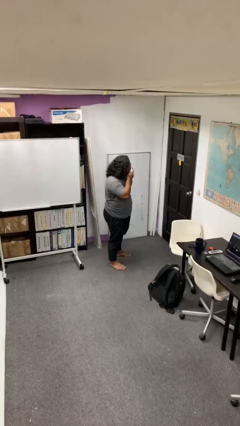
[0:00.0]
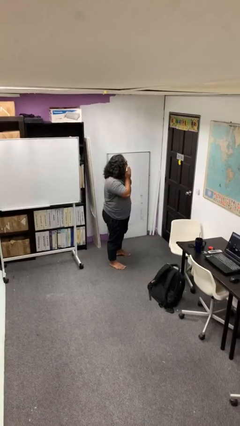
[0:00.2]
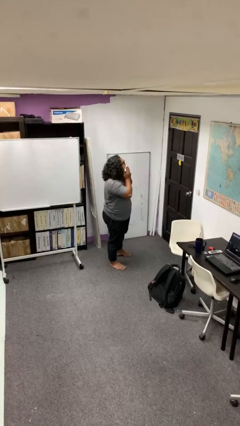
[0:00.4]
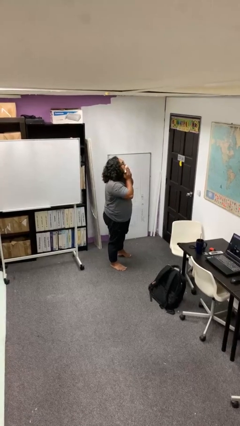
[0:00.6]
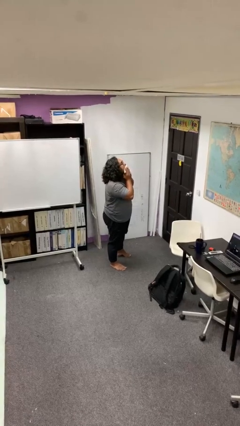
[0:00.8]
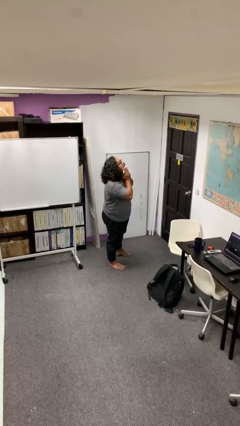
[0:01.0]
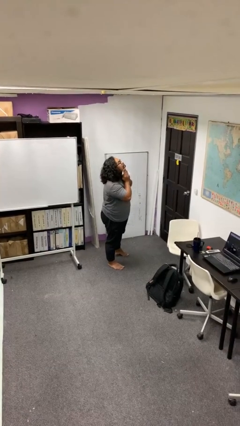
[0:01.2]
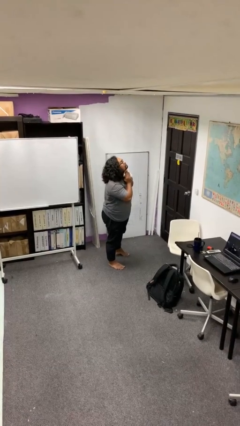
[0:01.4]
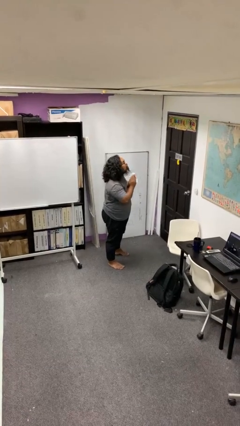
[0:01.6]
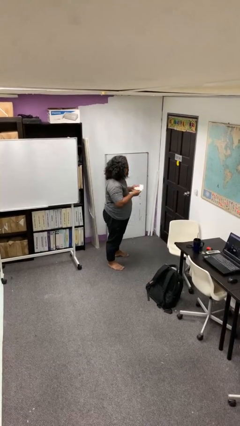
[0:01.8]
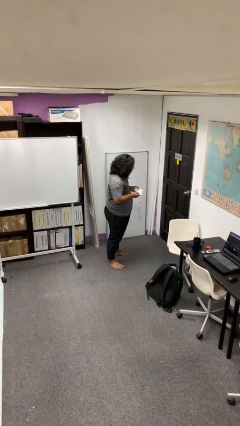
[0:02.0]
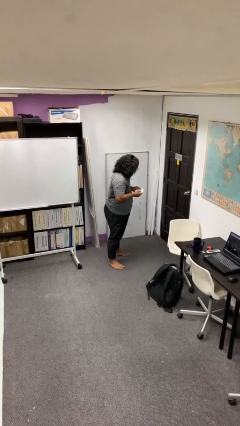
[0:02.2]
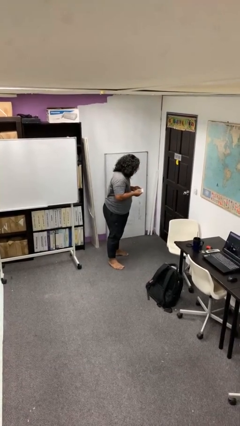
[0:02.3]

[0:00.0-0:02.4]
person wipes mouth with napkin

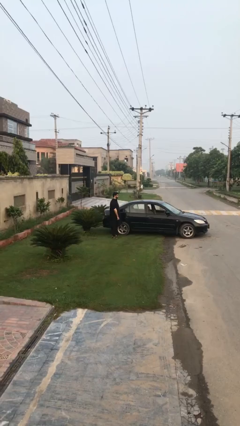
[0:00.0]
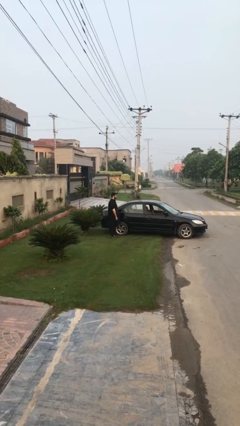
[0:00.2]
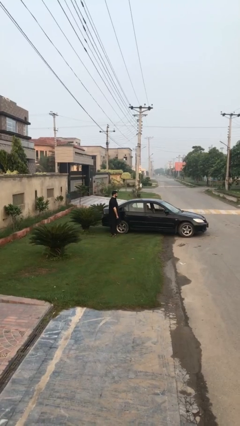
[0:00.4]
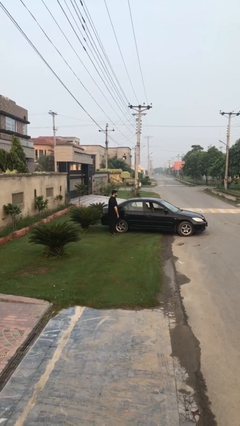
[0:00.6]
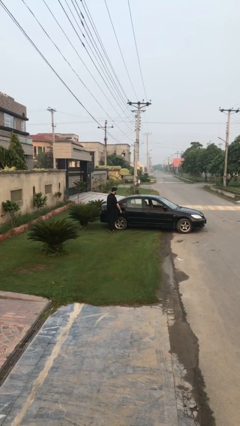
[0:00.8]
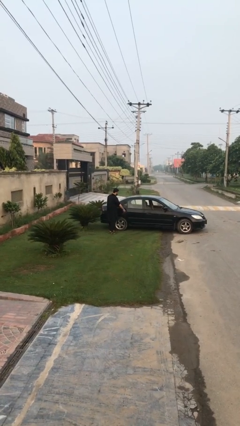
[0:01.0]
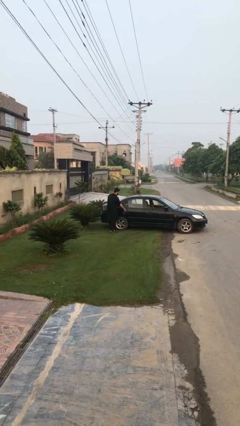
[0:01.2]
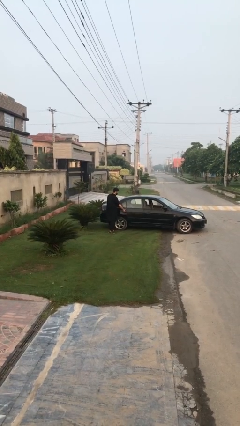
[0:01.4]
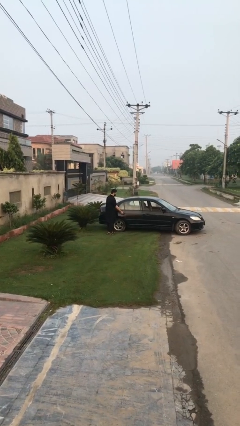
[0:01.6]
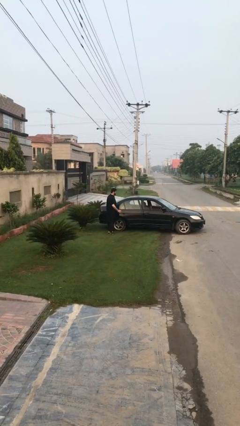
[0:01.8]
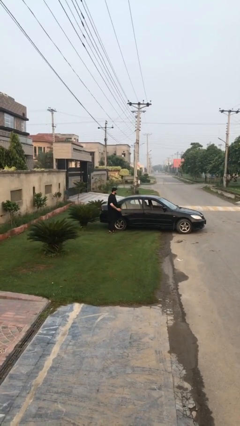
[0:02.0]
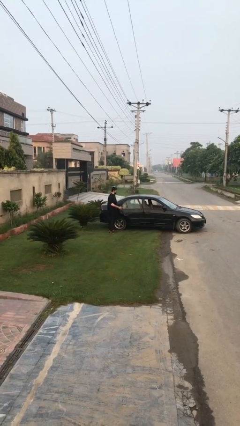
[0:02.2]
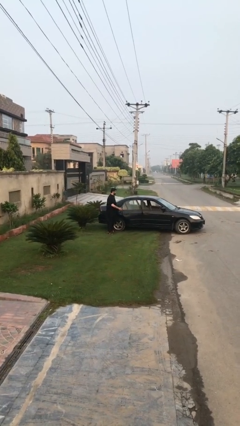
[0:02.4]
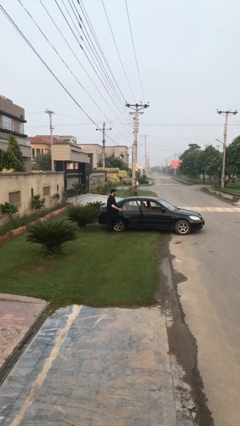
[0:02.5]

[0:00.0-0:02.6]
person opens car door

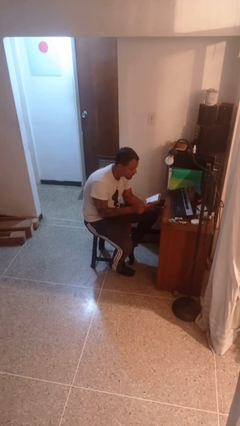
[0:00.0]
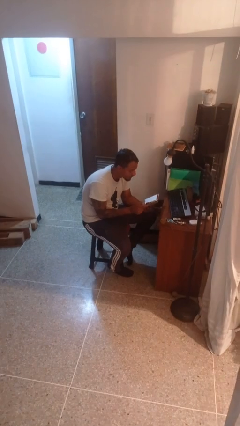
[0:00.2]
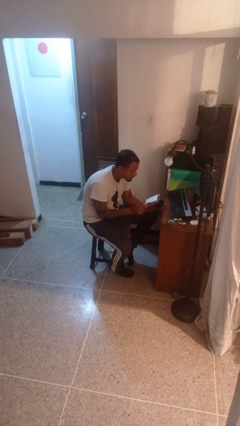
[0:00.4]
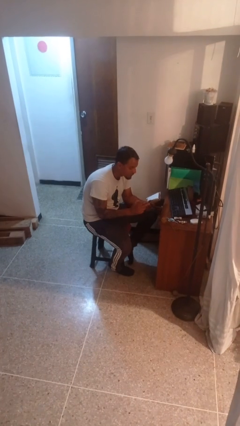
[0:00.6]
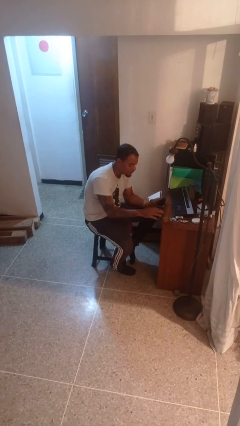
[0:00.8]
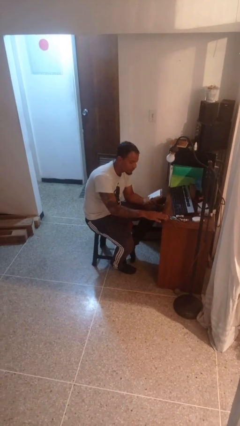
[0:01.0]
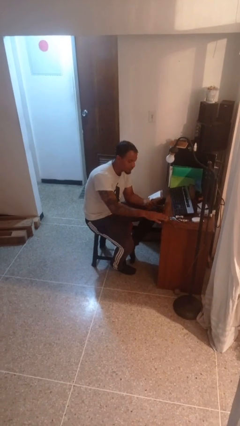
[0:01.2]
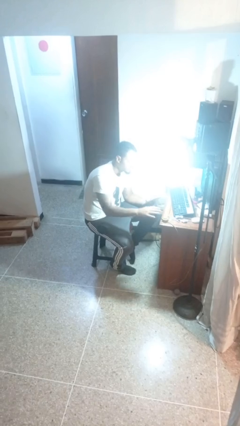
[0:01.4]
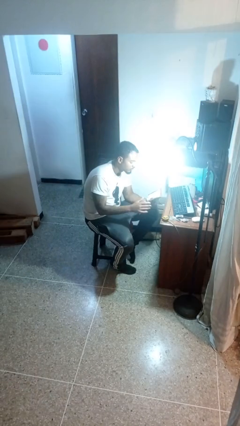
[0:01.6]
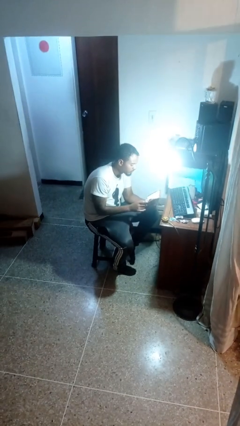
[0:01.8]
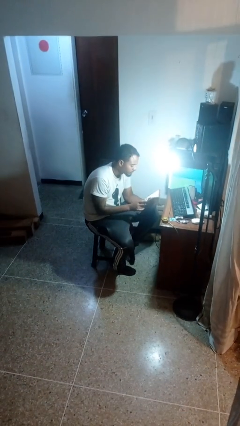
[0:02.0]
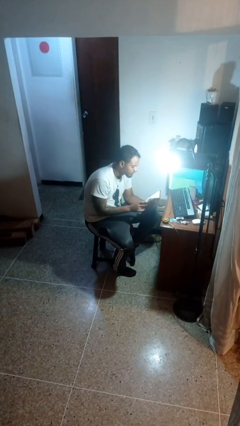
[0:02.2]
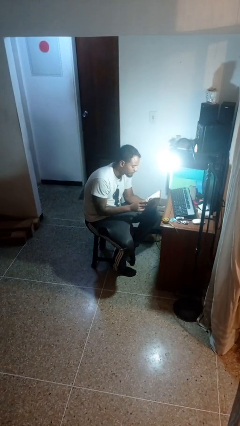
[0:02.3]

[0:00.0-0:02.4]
person turns on lamp

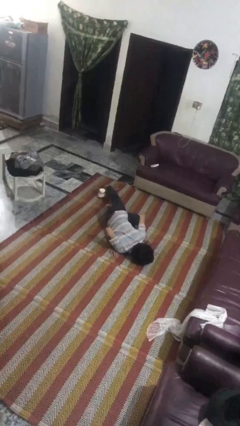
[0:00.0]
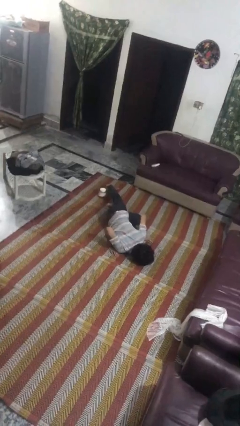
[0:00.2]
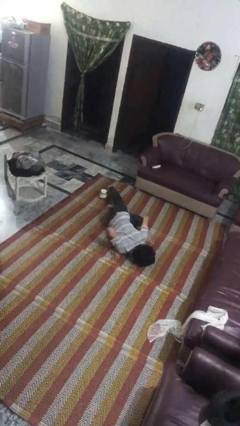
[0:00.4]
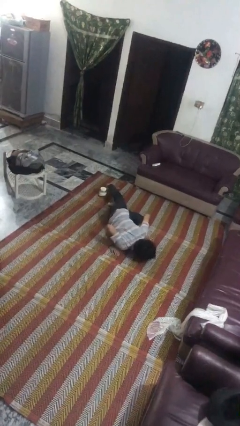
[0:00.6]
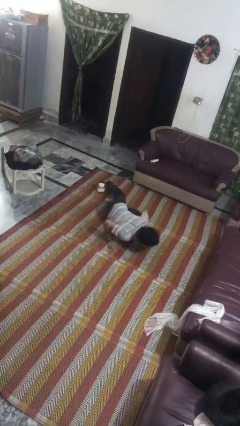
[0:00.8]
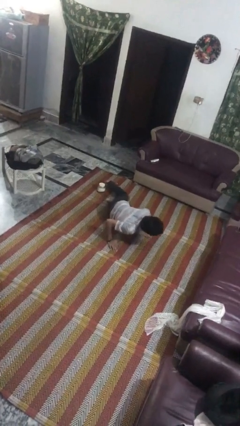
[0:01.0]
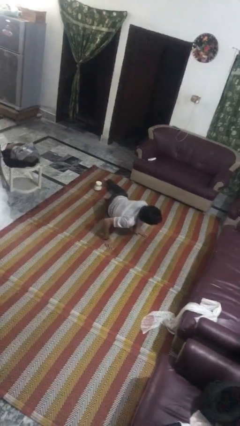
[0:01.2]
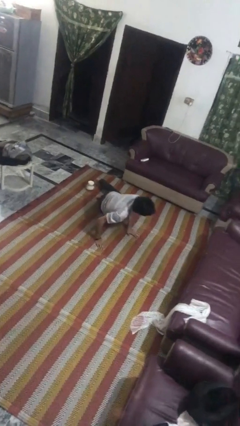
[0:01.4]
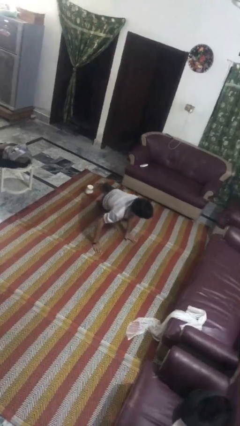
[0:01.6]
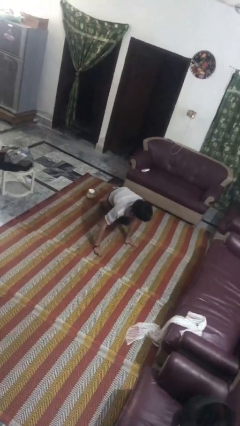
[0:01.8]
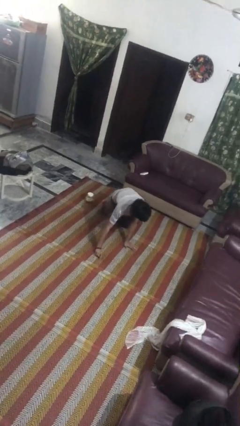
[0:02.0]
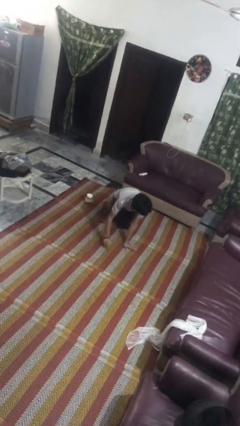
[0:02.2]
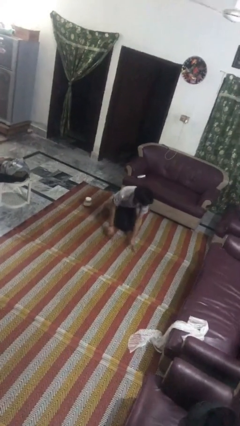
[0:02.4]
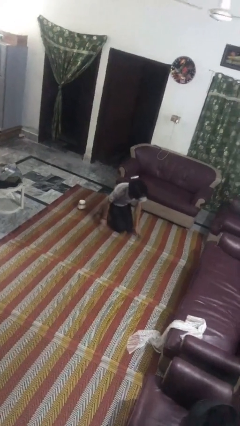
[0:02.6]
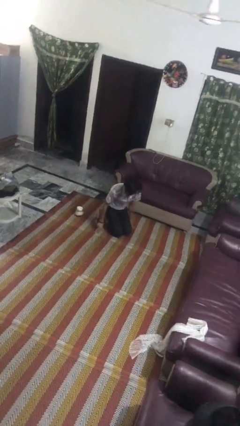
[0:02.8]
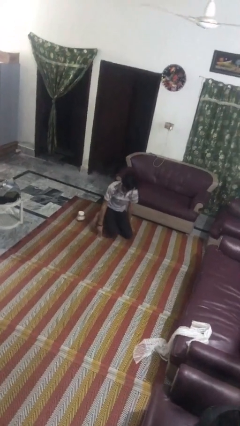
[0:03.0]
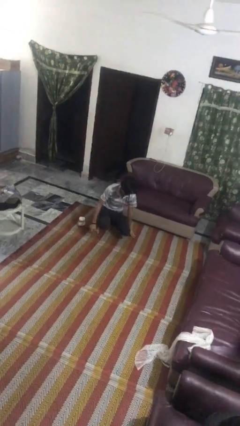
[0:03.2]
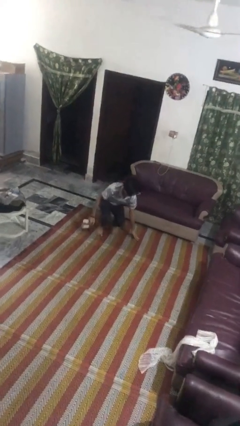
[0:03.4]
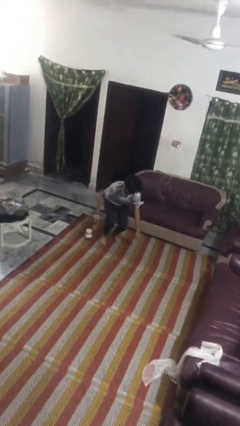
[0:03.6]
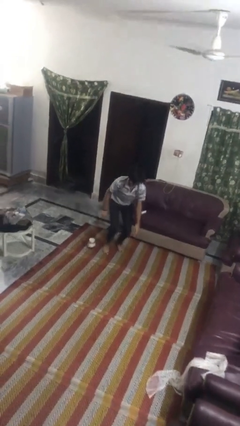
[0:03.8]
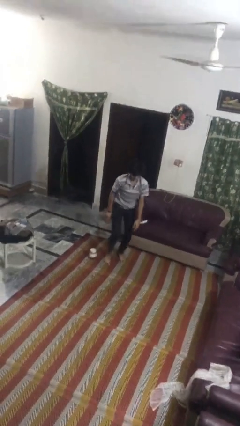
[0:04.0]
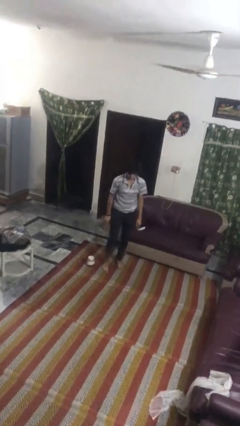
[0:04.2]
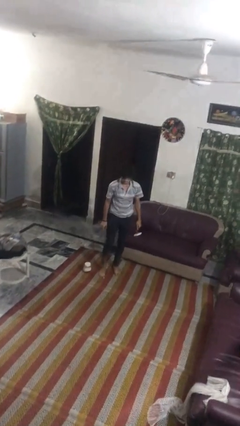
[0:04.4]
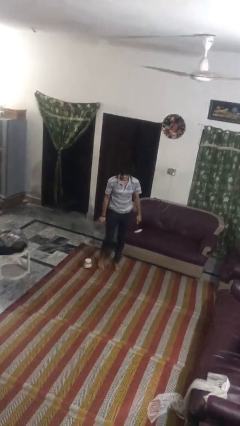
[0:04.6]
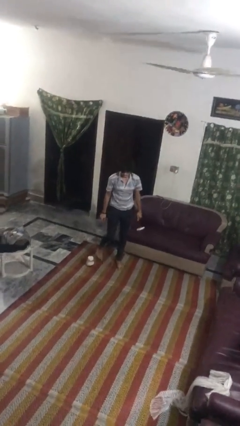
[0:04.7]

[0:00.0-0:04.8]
person stands up from floor

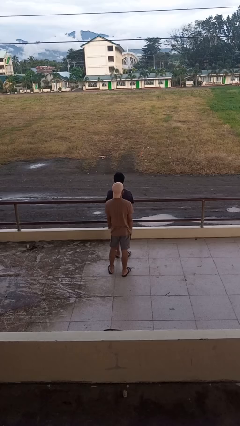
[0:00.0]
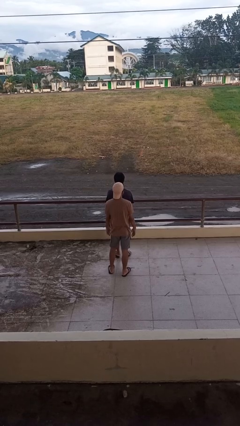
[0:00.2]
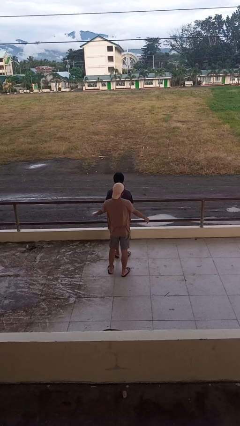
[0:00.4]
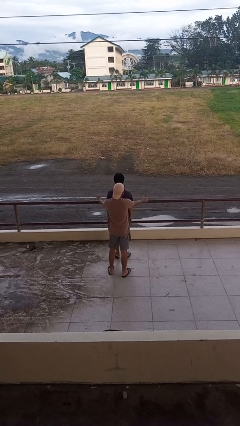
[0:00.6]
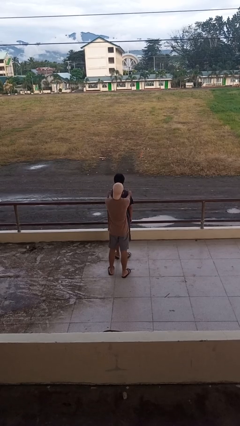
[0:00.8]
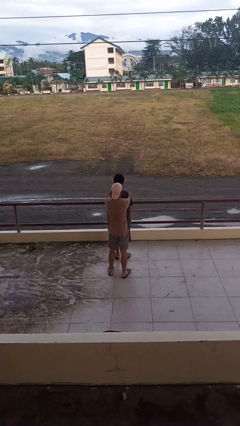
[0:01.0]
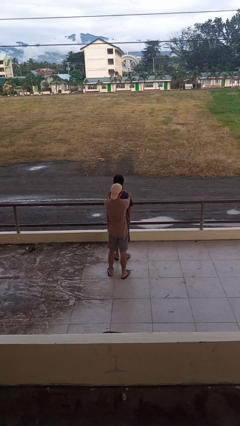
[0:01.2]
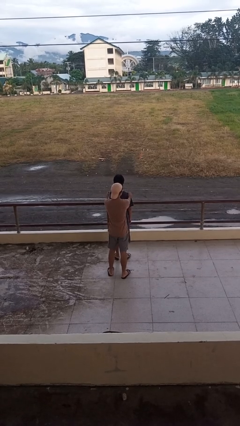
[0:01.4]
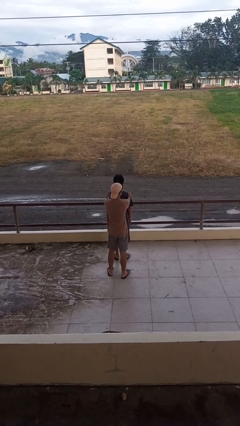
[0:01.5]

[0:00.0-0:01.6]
person pounds shoulders of person

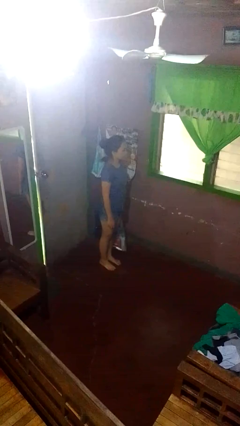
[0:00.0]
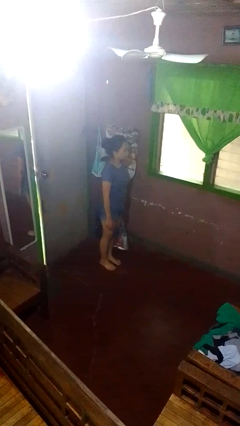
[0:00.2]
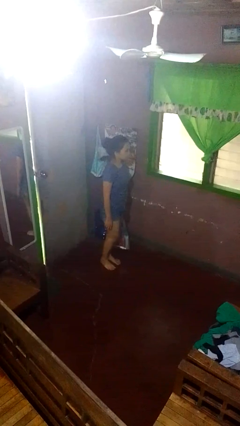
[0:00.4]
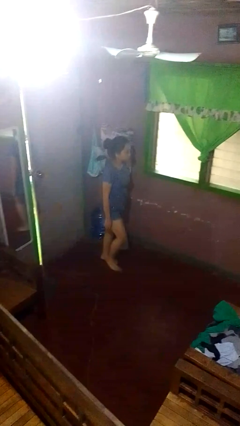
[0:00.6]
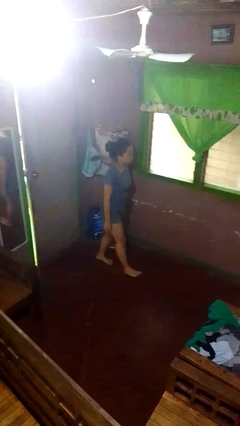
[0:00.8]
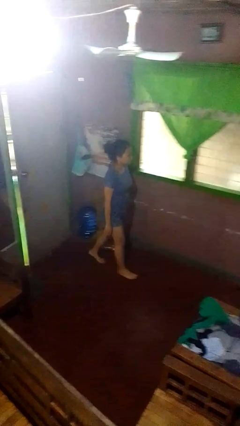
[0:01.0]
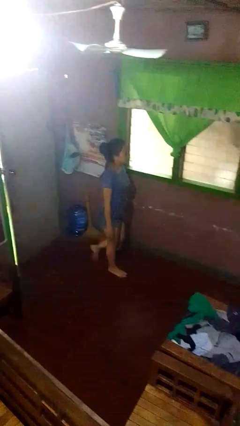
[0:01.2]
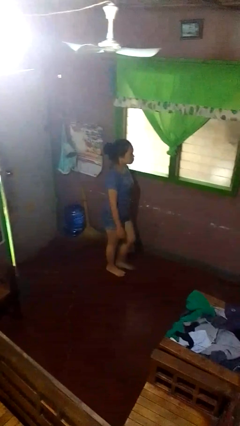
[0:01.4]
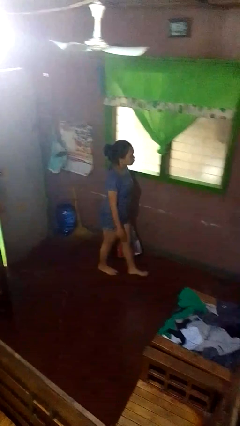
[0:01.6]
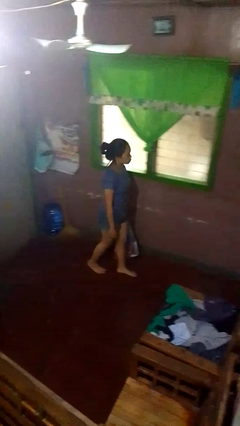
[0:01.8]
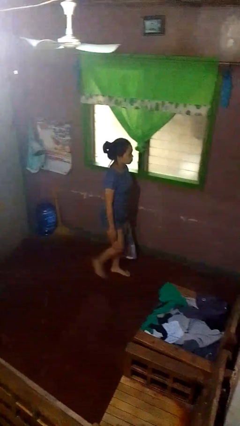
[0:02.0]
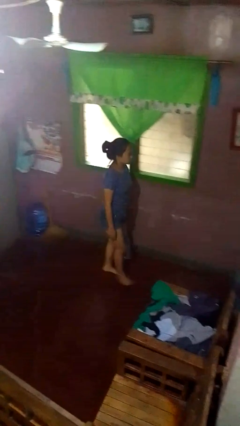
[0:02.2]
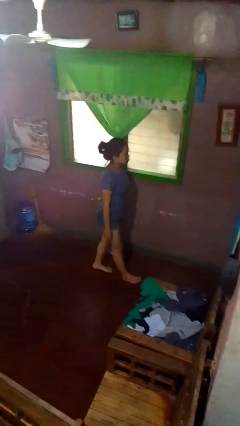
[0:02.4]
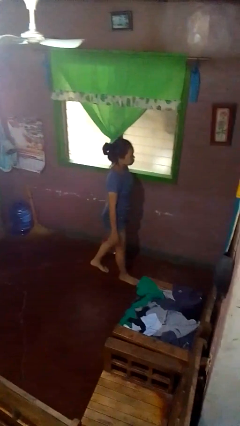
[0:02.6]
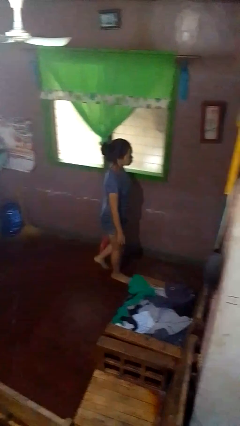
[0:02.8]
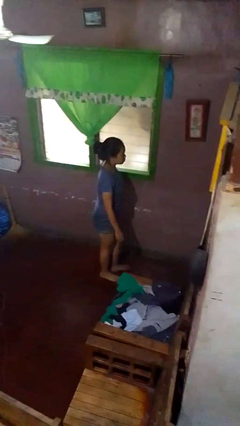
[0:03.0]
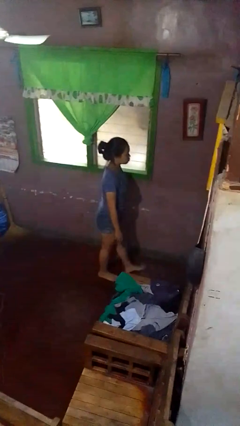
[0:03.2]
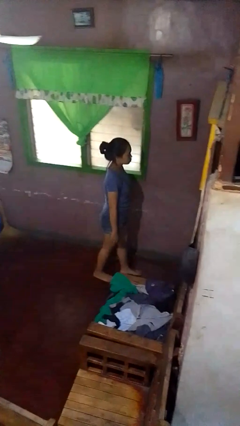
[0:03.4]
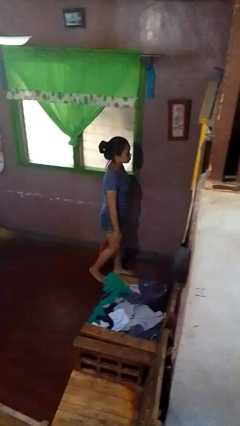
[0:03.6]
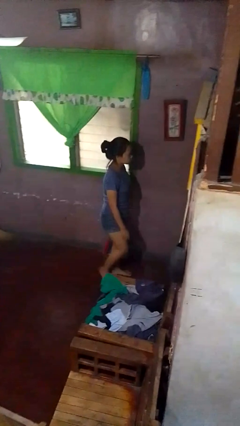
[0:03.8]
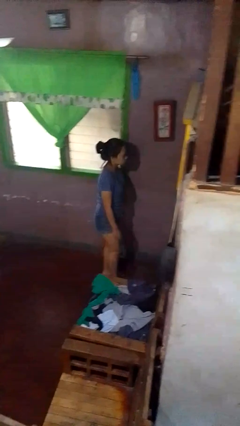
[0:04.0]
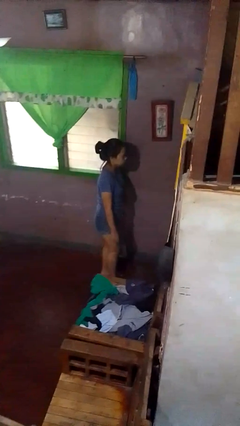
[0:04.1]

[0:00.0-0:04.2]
person carries groceries
